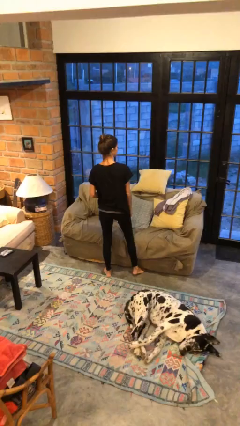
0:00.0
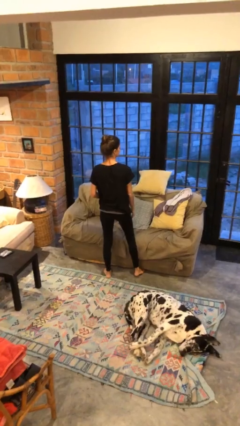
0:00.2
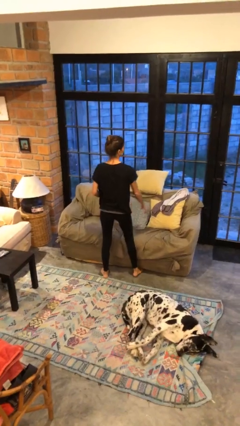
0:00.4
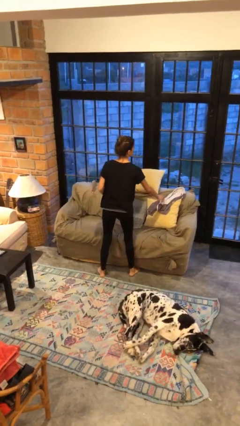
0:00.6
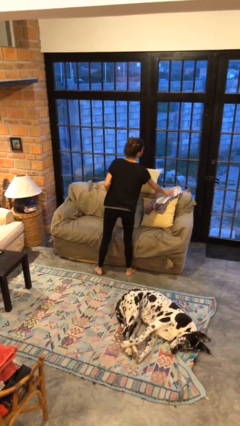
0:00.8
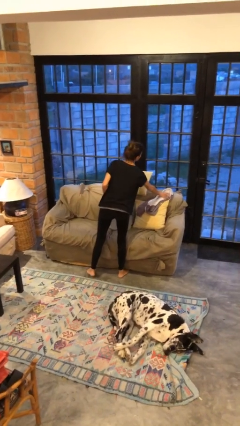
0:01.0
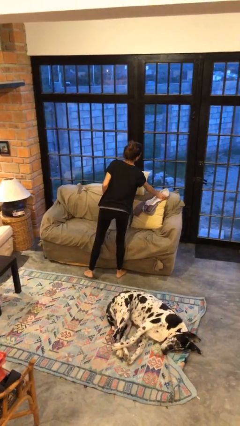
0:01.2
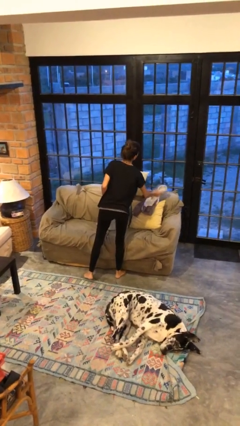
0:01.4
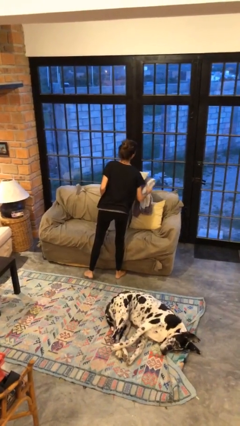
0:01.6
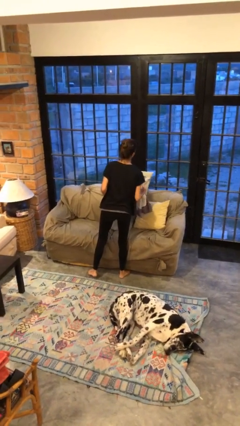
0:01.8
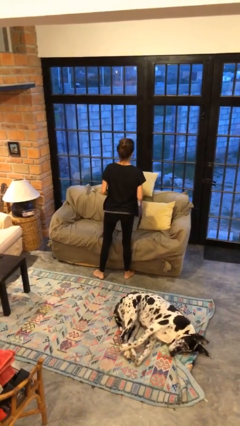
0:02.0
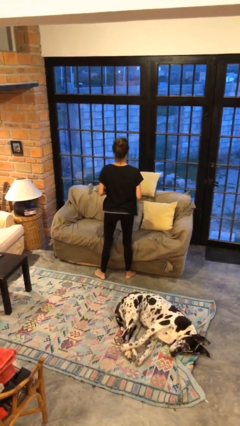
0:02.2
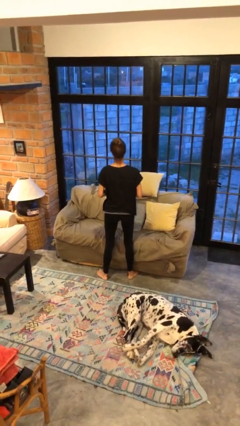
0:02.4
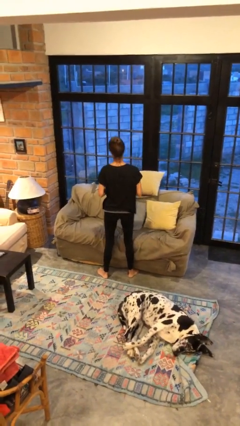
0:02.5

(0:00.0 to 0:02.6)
person picks up object from couch

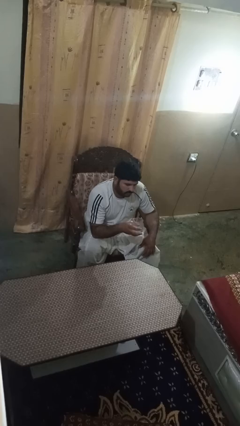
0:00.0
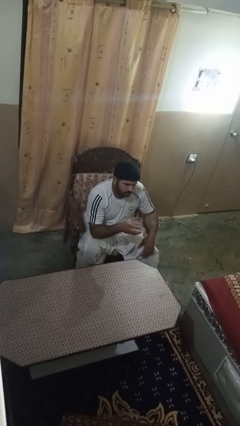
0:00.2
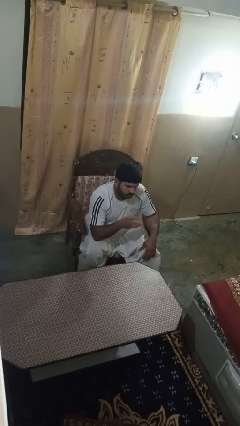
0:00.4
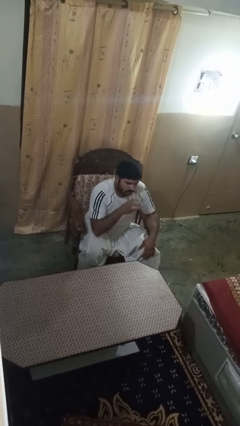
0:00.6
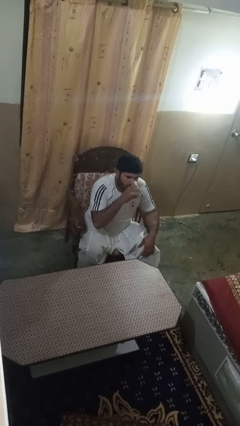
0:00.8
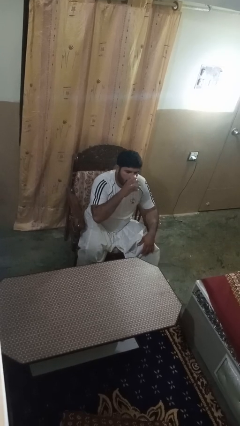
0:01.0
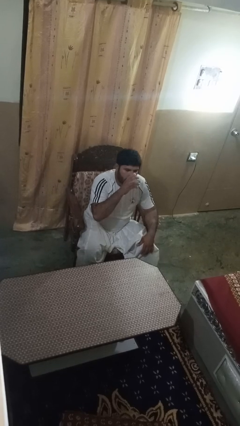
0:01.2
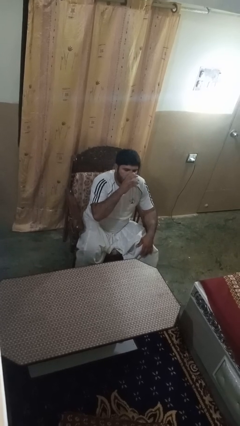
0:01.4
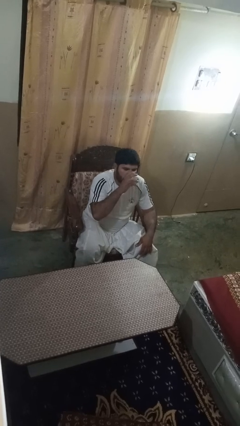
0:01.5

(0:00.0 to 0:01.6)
person drinks from shotglass

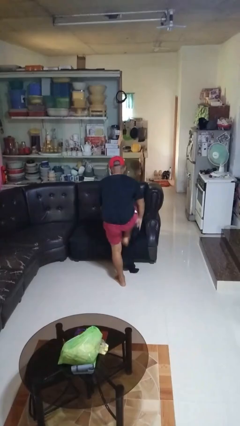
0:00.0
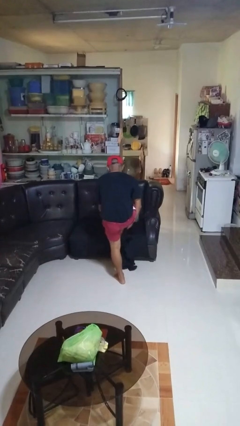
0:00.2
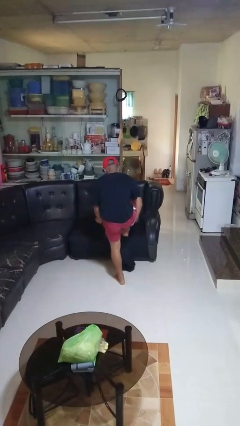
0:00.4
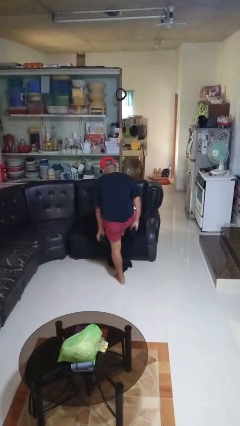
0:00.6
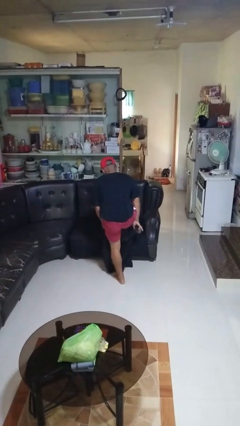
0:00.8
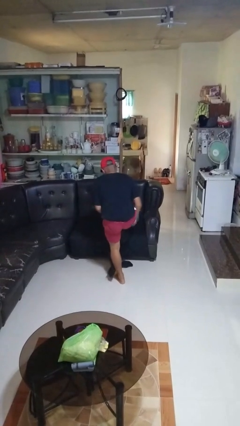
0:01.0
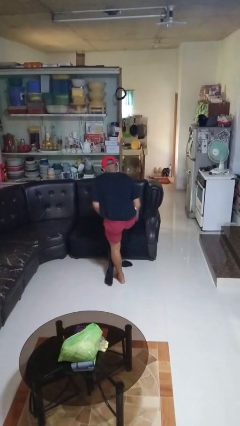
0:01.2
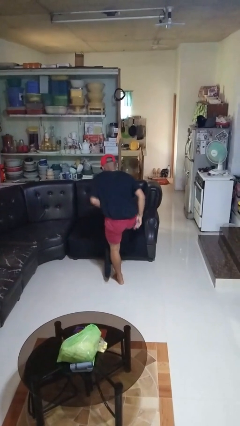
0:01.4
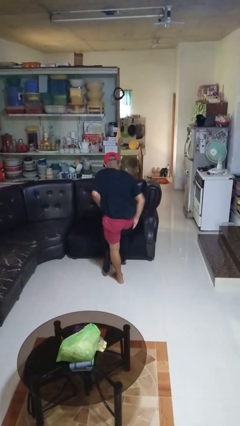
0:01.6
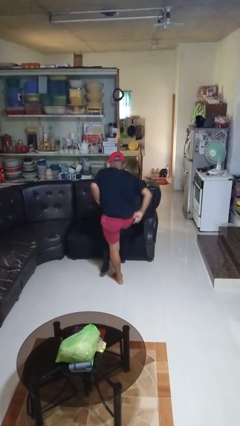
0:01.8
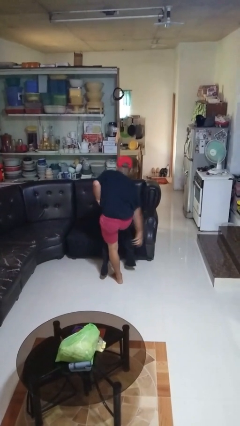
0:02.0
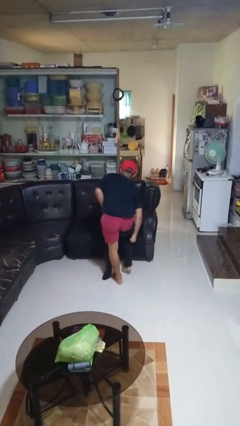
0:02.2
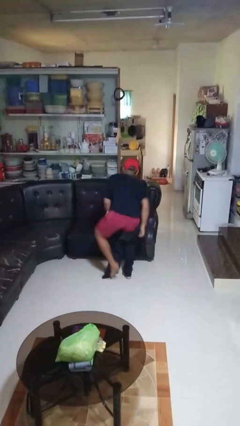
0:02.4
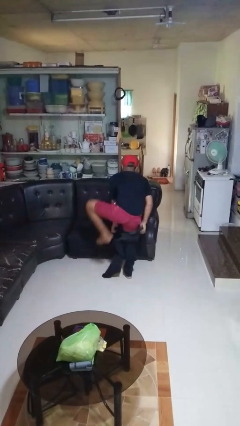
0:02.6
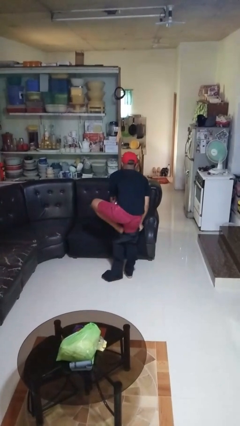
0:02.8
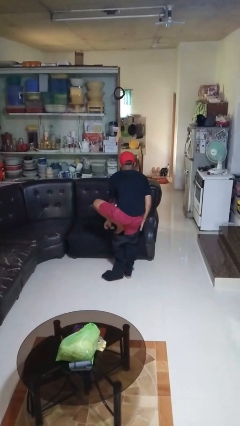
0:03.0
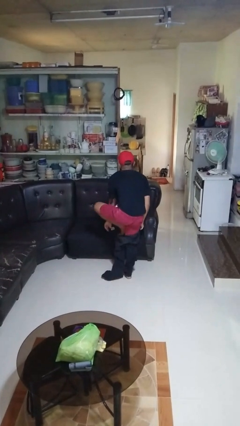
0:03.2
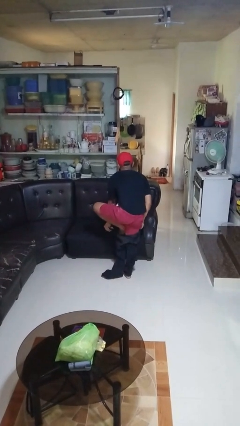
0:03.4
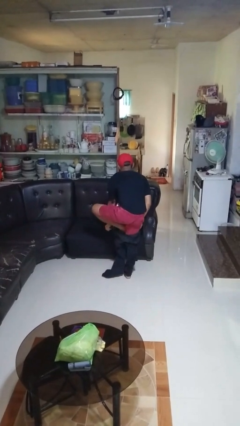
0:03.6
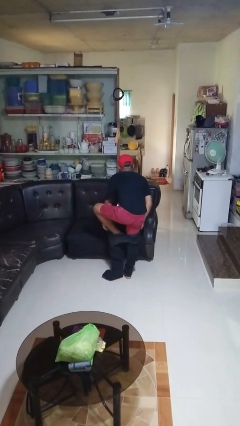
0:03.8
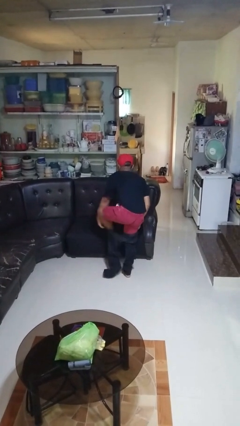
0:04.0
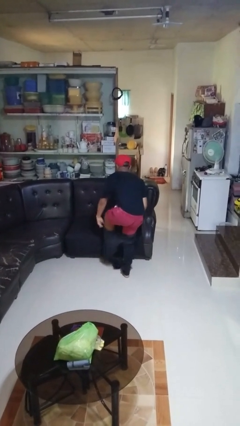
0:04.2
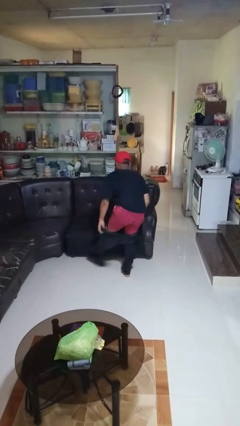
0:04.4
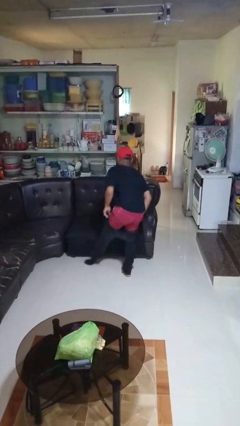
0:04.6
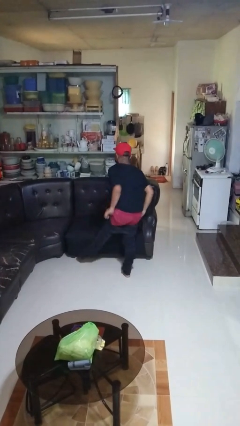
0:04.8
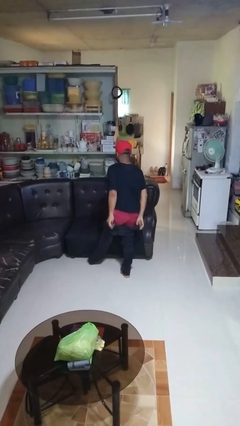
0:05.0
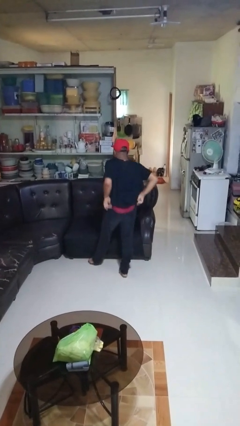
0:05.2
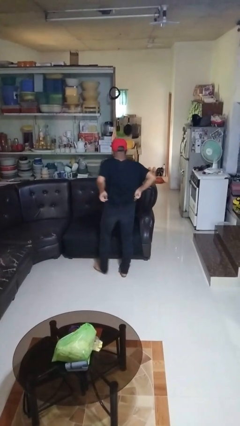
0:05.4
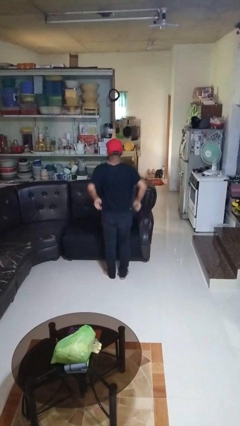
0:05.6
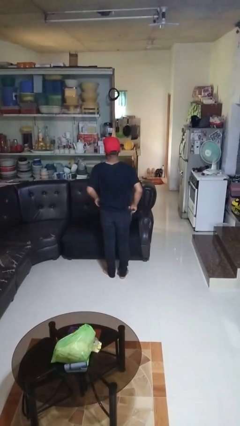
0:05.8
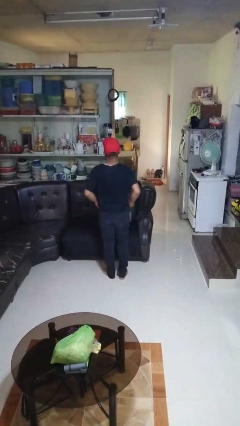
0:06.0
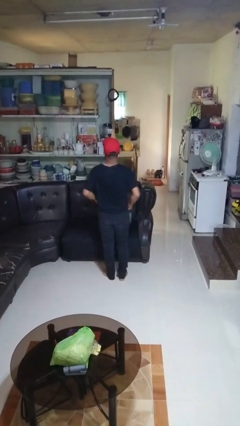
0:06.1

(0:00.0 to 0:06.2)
person puts on pants

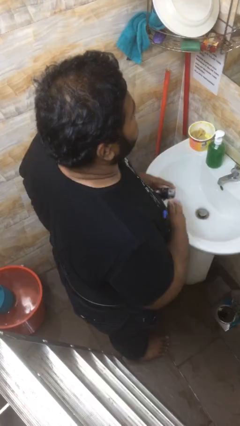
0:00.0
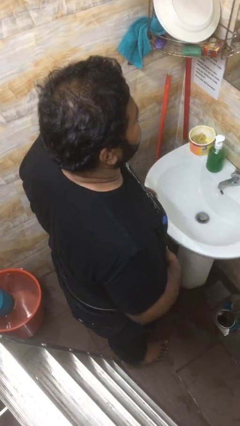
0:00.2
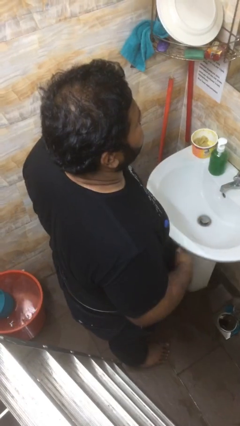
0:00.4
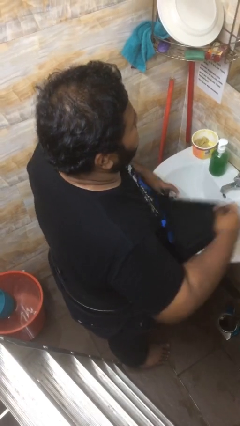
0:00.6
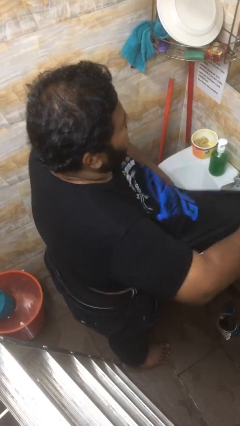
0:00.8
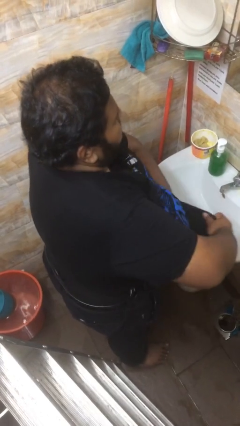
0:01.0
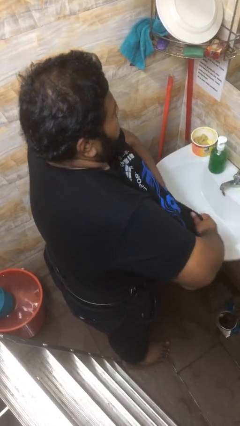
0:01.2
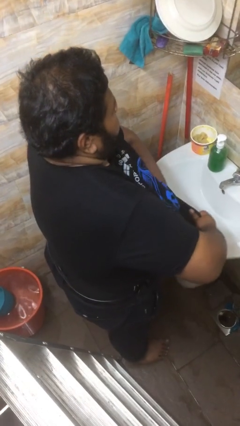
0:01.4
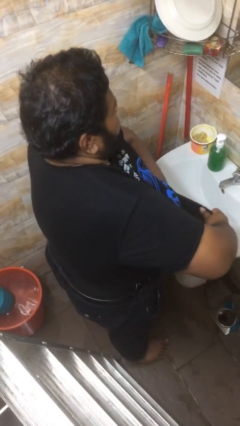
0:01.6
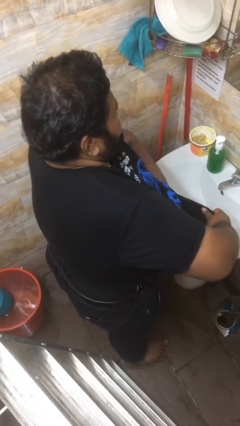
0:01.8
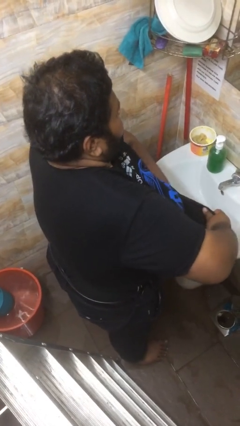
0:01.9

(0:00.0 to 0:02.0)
person applies deodorant

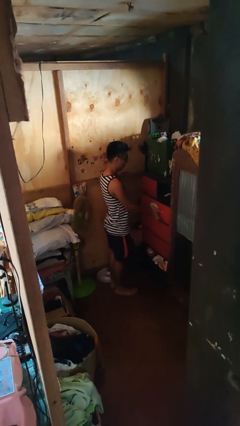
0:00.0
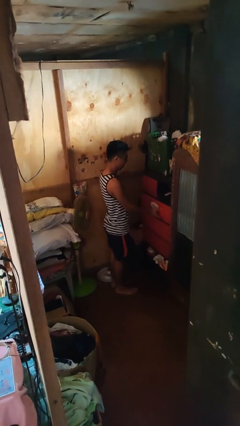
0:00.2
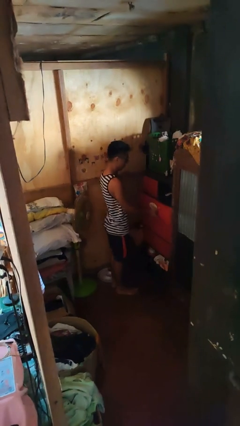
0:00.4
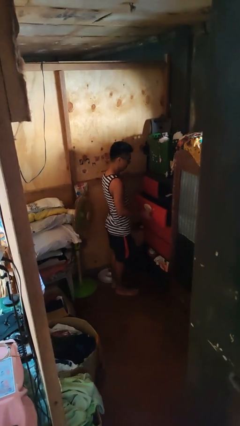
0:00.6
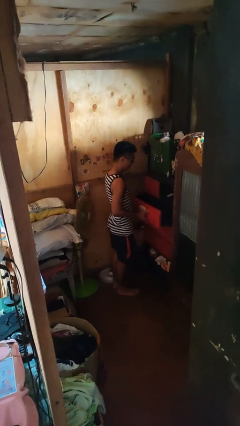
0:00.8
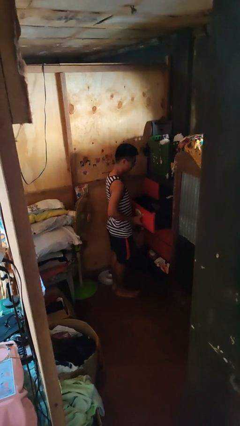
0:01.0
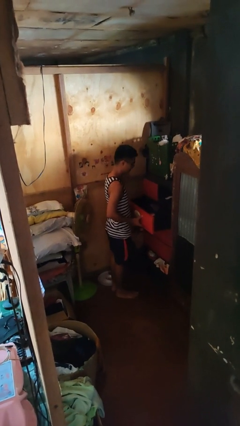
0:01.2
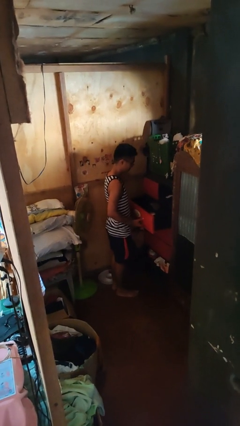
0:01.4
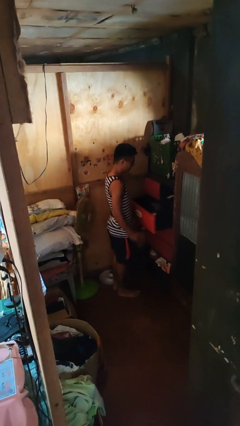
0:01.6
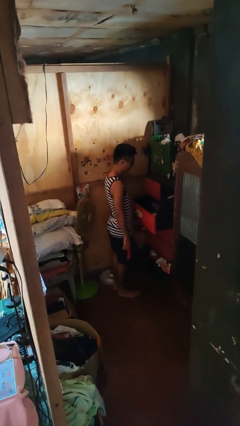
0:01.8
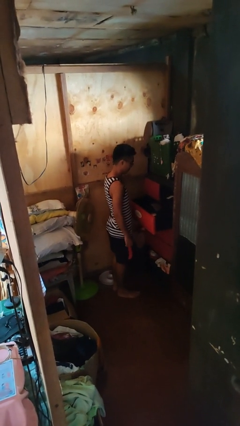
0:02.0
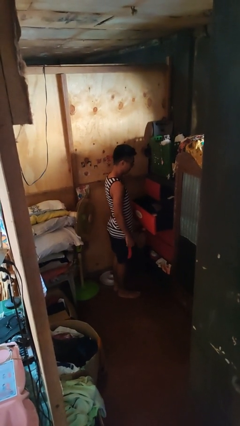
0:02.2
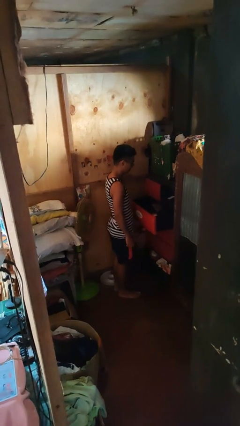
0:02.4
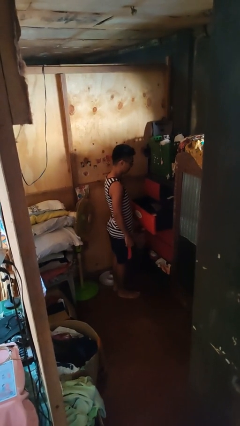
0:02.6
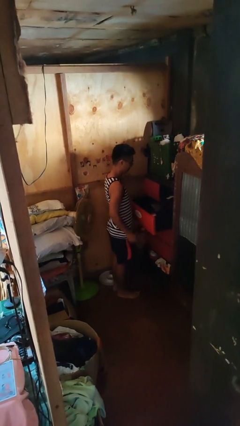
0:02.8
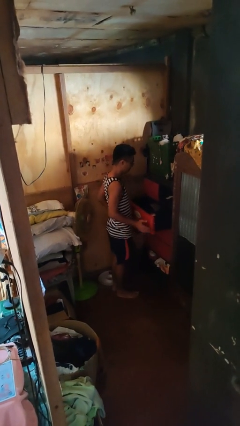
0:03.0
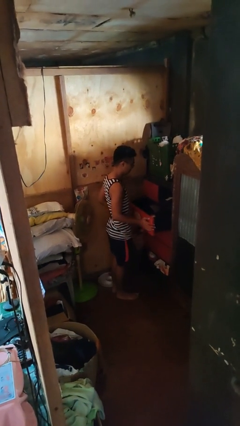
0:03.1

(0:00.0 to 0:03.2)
person opens dresser drawer

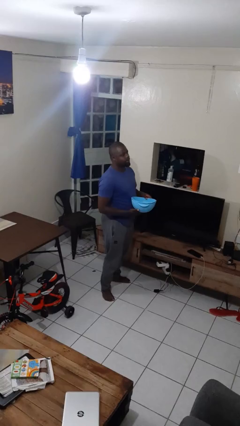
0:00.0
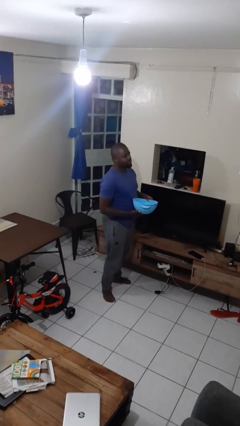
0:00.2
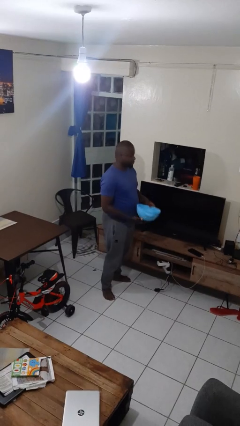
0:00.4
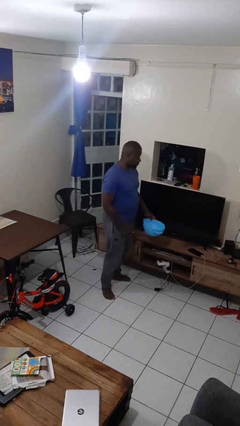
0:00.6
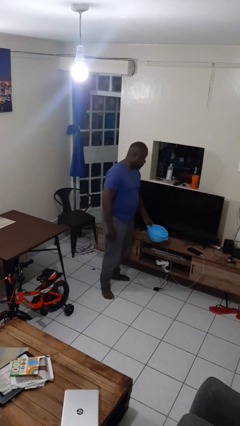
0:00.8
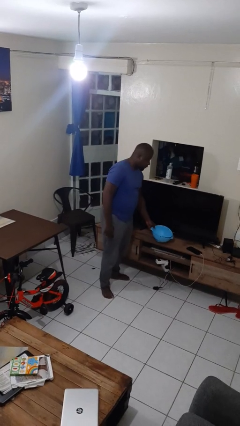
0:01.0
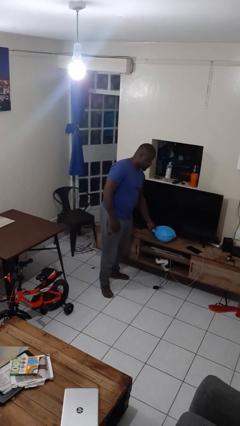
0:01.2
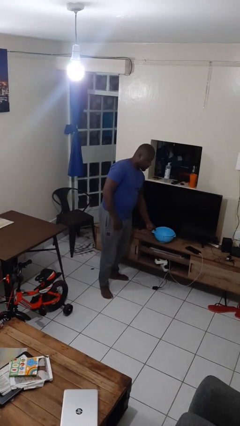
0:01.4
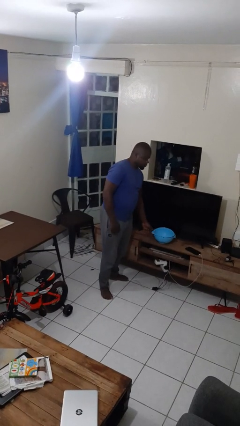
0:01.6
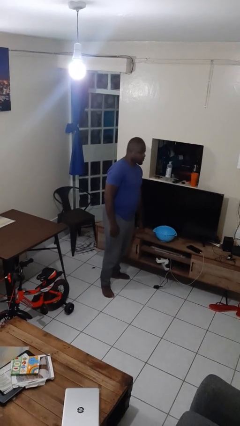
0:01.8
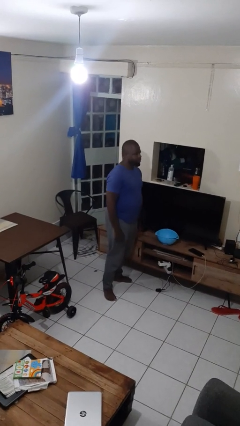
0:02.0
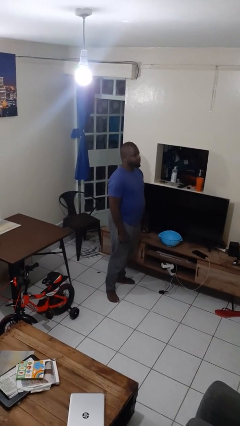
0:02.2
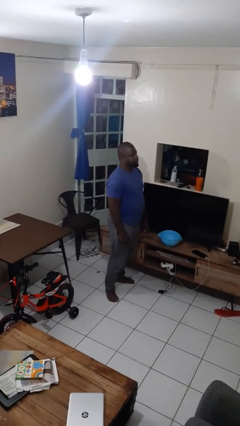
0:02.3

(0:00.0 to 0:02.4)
person puts down object on countertop
